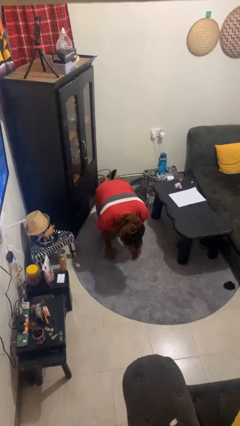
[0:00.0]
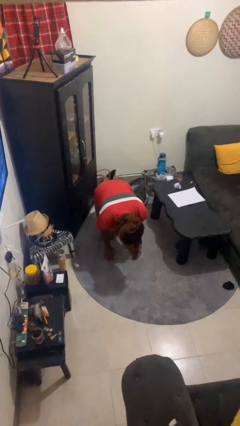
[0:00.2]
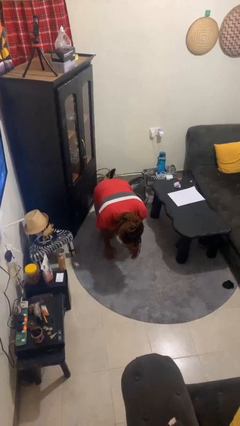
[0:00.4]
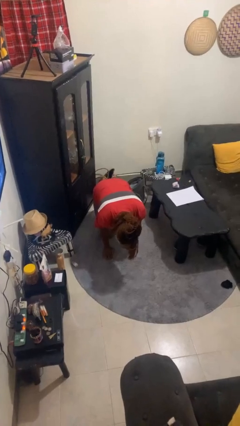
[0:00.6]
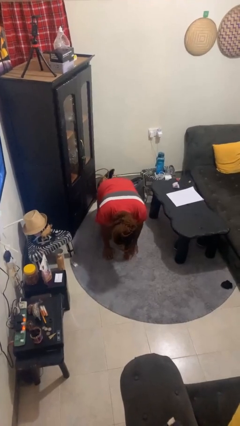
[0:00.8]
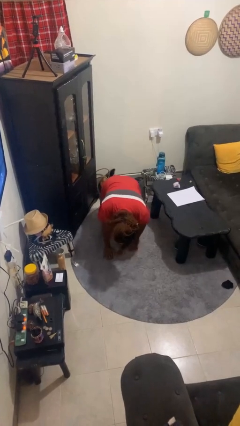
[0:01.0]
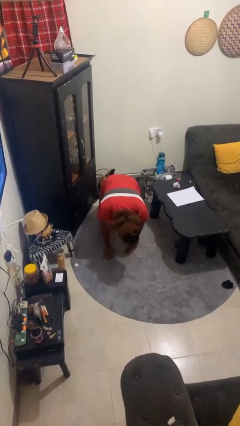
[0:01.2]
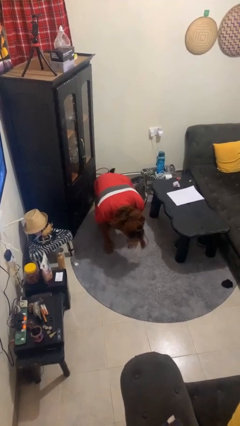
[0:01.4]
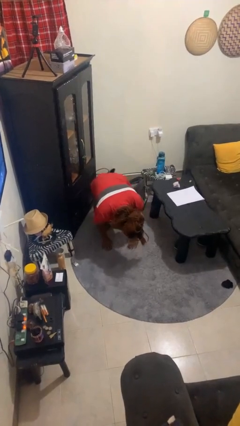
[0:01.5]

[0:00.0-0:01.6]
person crawls

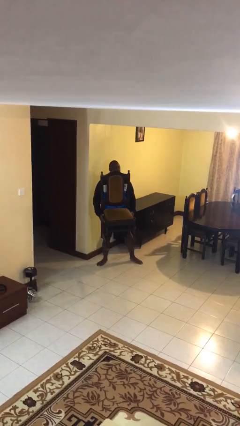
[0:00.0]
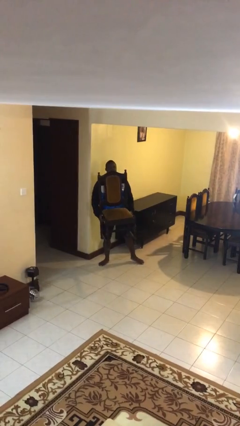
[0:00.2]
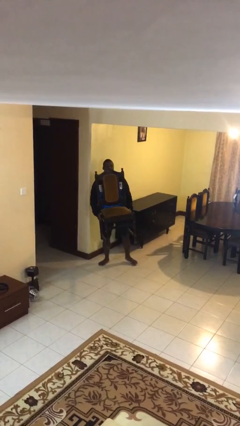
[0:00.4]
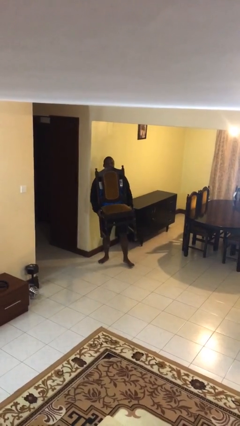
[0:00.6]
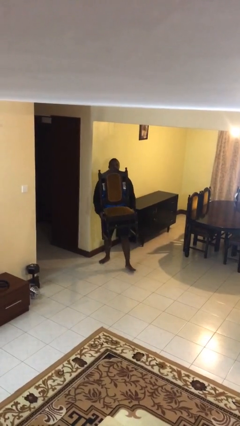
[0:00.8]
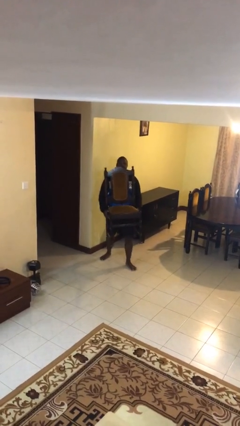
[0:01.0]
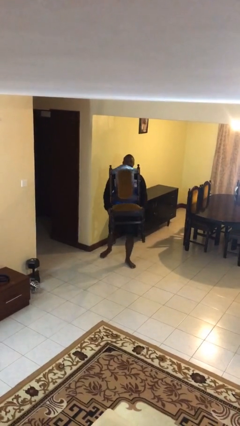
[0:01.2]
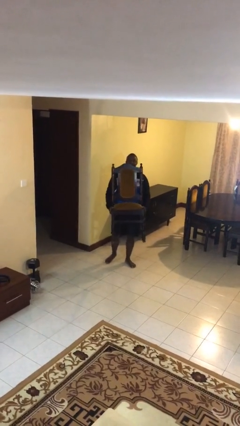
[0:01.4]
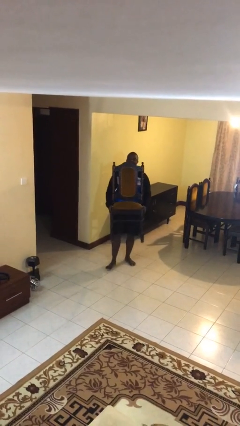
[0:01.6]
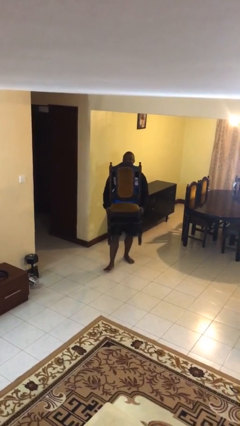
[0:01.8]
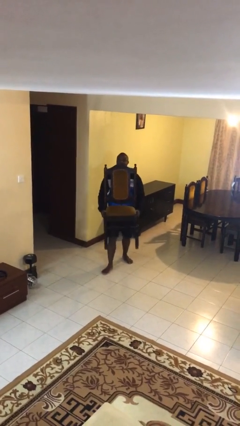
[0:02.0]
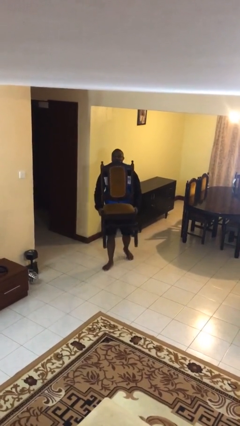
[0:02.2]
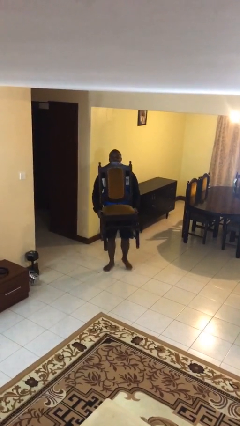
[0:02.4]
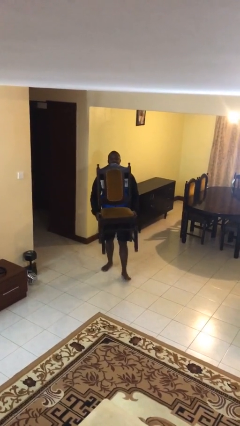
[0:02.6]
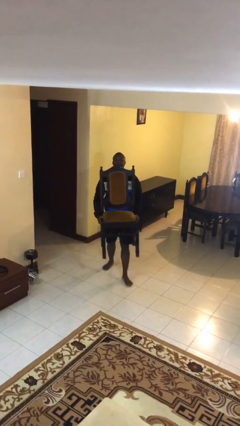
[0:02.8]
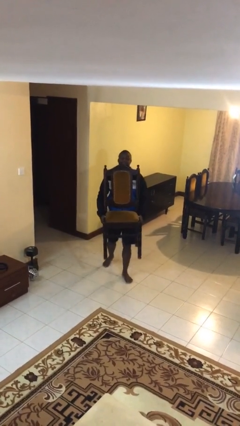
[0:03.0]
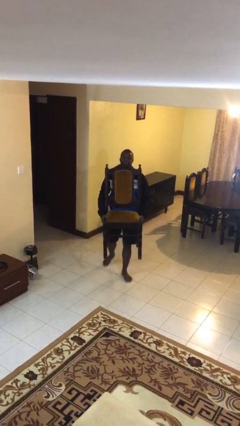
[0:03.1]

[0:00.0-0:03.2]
person carries heavy object

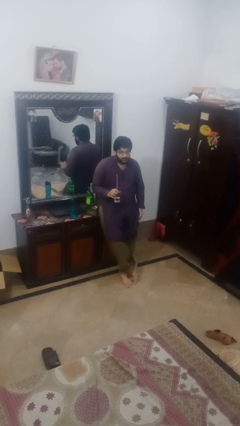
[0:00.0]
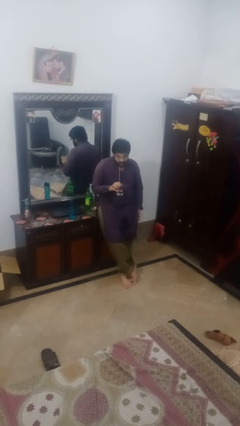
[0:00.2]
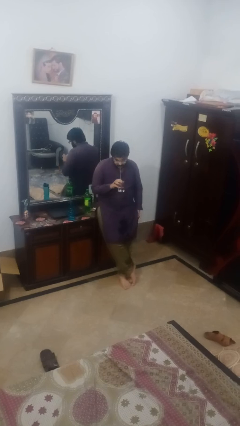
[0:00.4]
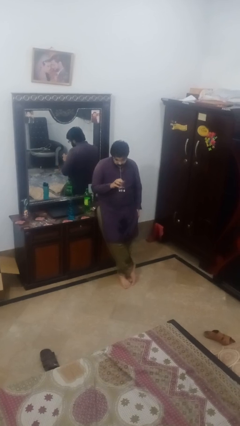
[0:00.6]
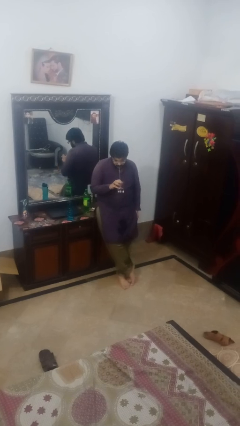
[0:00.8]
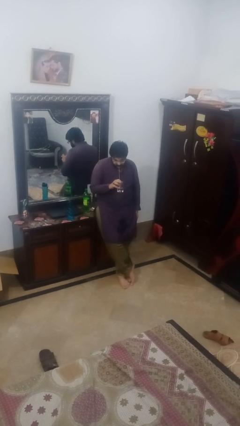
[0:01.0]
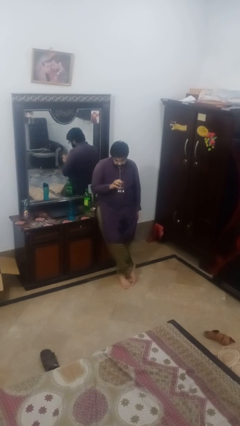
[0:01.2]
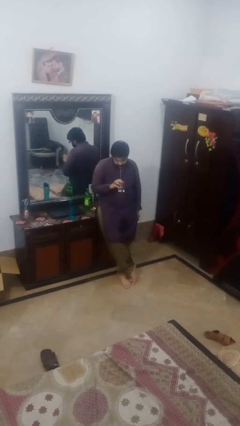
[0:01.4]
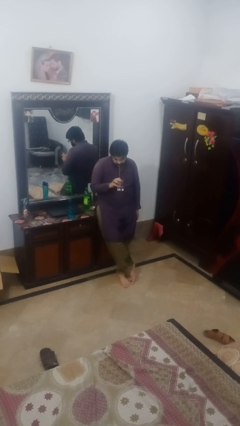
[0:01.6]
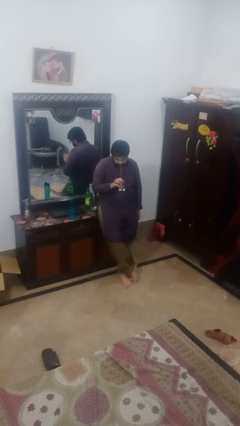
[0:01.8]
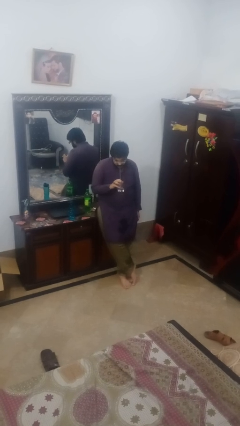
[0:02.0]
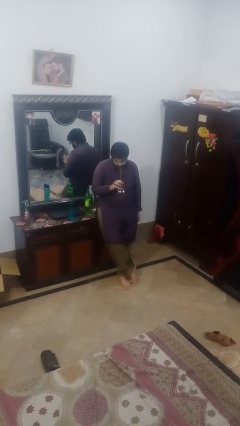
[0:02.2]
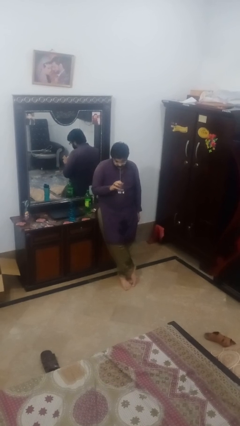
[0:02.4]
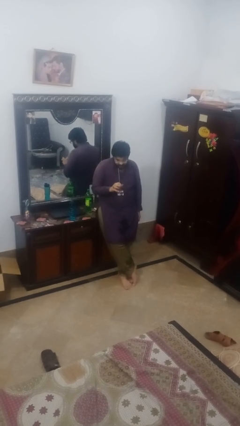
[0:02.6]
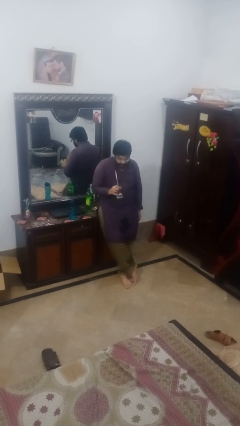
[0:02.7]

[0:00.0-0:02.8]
person drinks from straw

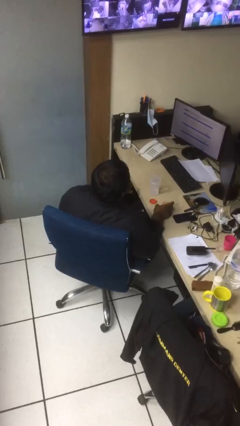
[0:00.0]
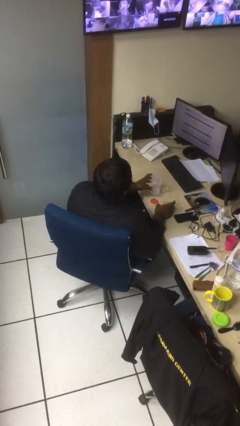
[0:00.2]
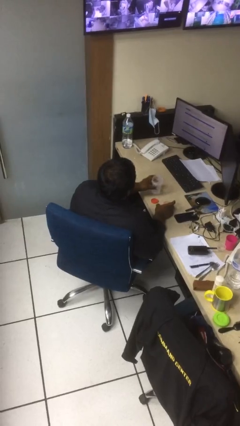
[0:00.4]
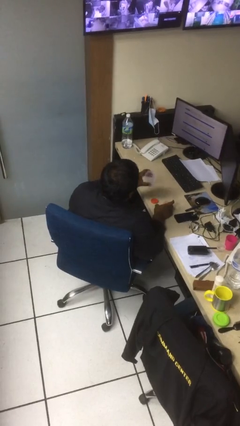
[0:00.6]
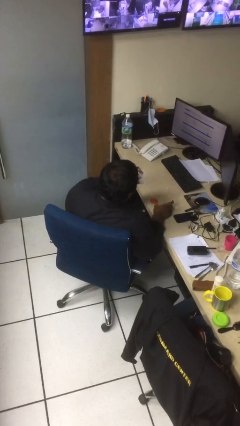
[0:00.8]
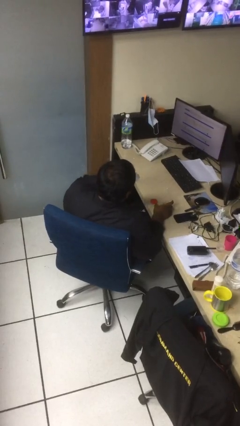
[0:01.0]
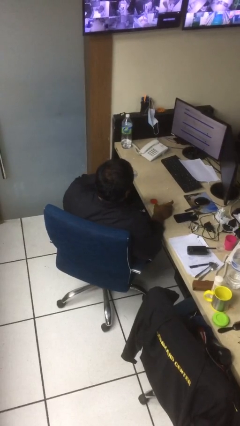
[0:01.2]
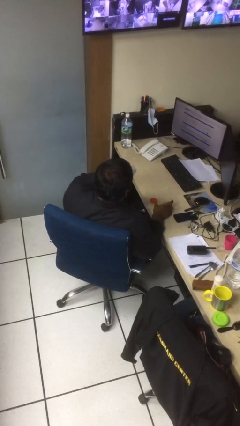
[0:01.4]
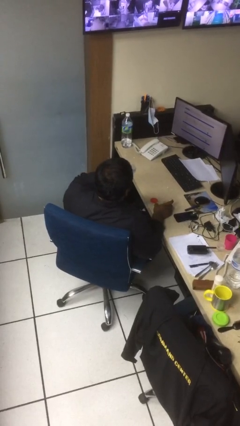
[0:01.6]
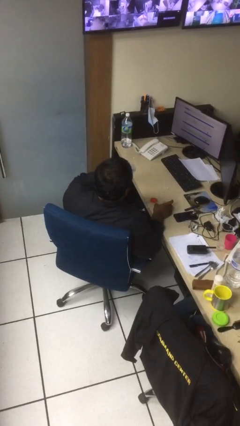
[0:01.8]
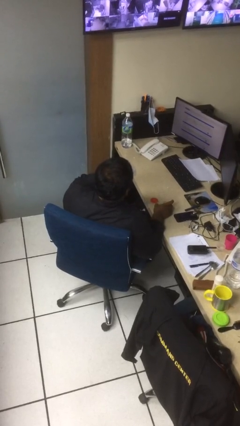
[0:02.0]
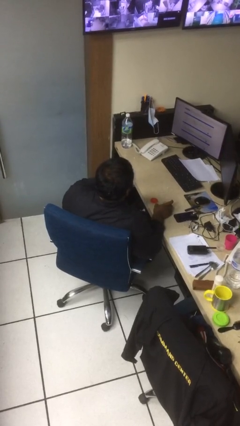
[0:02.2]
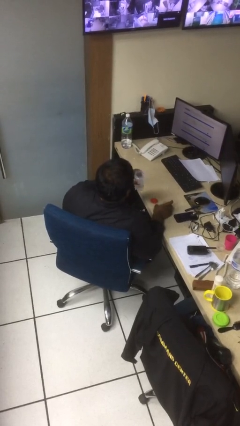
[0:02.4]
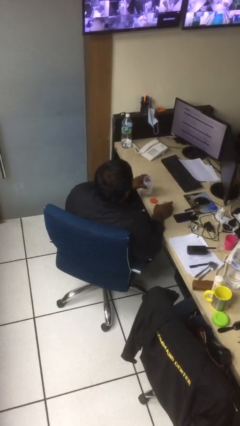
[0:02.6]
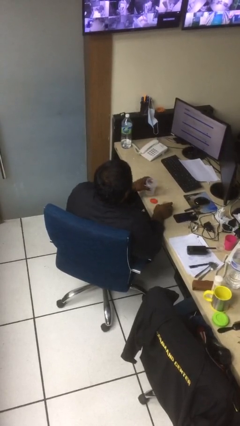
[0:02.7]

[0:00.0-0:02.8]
person drinks from cup

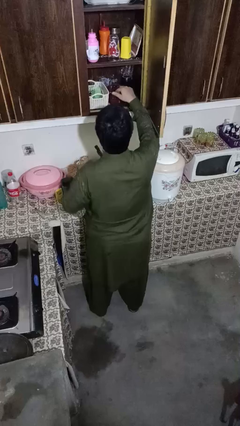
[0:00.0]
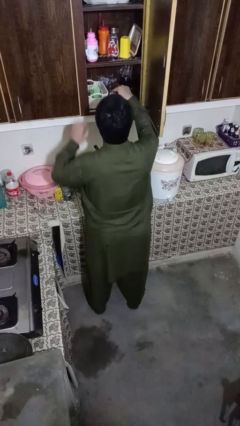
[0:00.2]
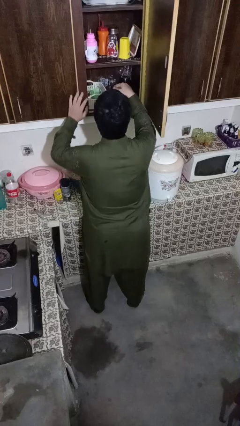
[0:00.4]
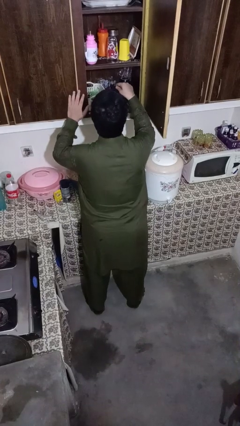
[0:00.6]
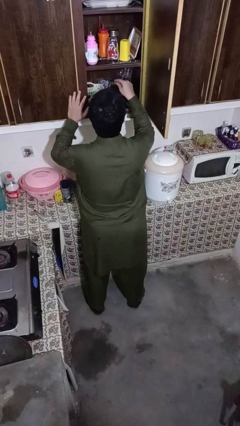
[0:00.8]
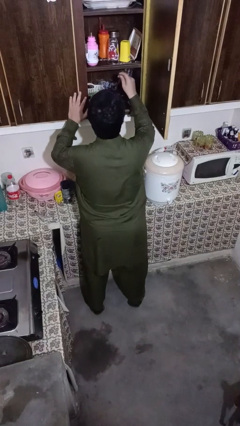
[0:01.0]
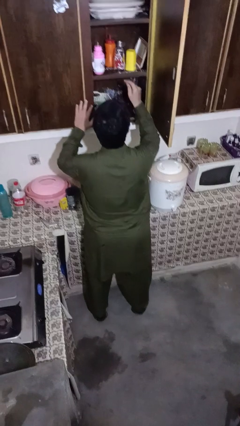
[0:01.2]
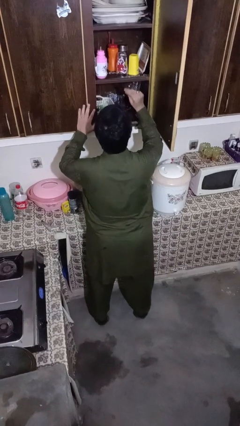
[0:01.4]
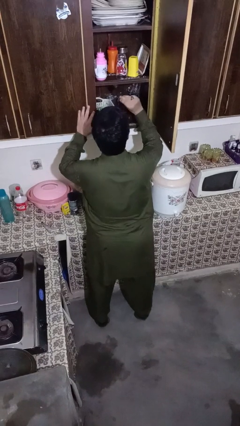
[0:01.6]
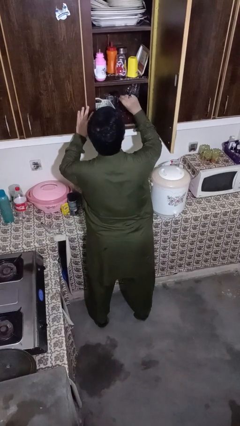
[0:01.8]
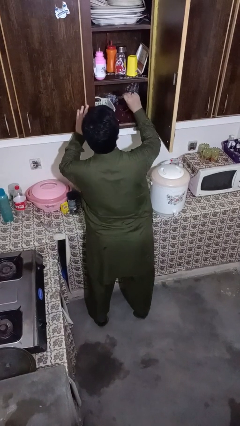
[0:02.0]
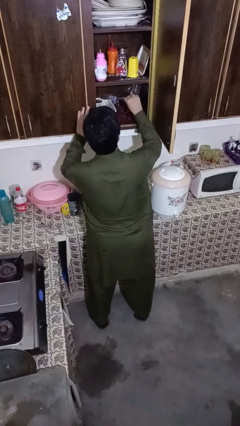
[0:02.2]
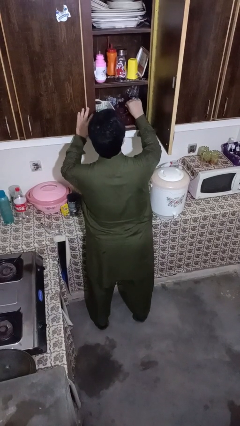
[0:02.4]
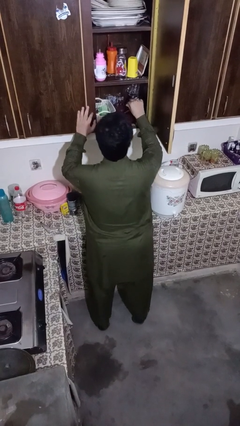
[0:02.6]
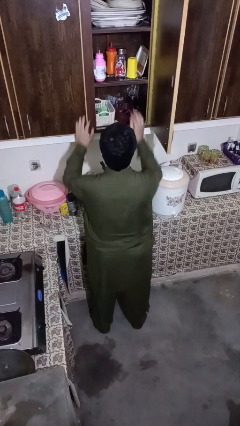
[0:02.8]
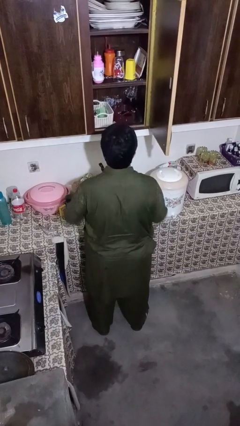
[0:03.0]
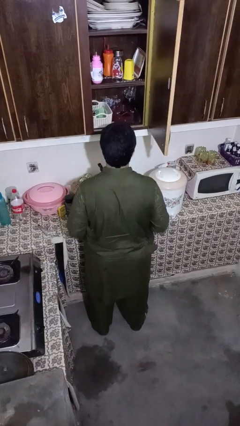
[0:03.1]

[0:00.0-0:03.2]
person searches in kitchen drawer

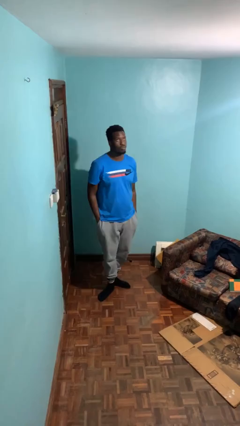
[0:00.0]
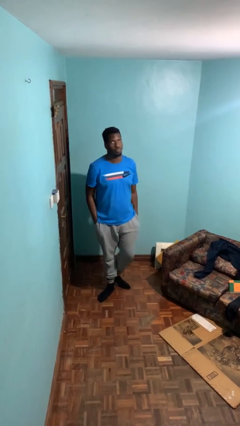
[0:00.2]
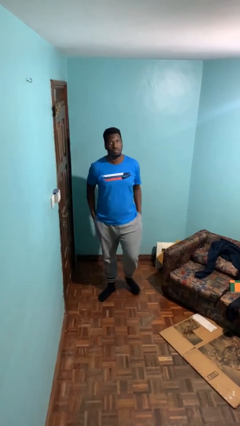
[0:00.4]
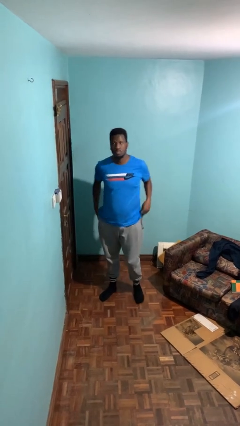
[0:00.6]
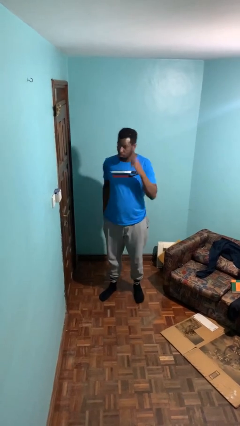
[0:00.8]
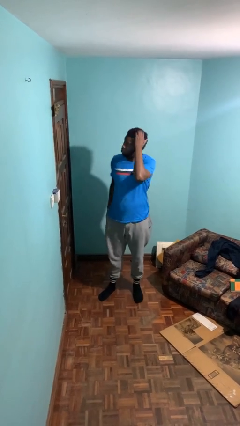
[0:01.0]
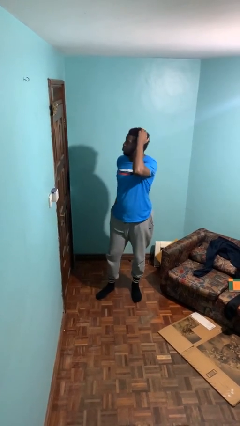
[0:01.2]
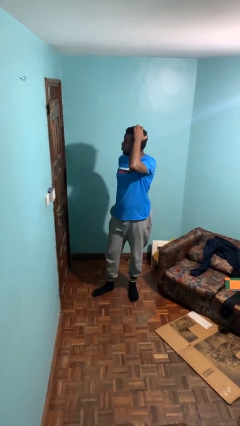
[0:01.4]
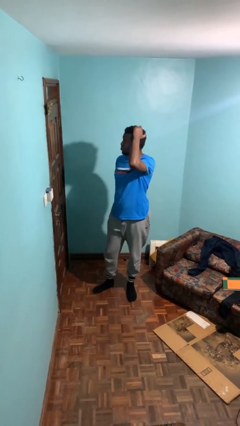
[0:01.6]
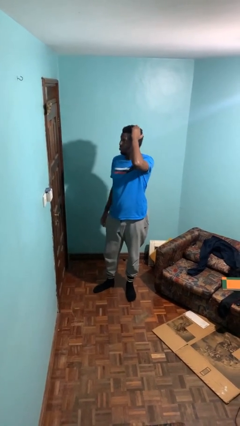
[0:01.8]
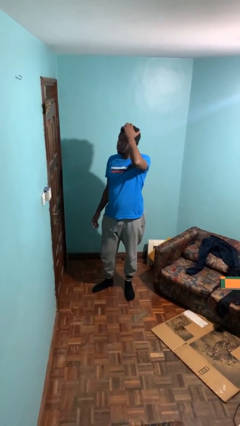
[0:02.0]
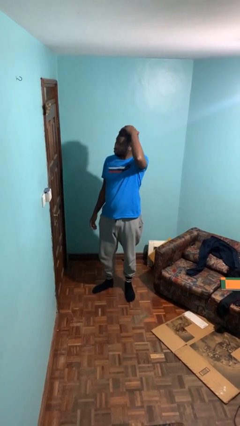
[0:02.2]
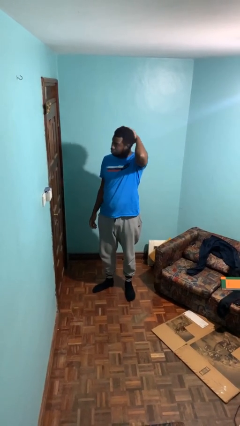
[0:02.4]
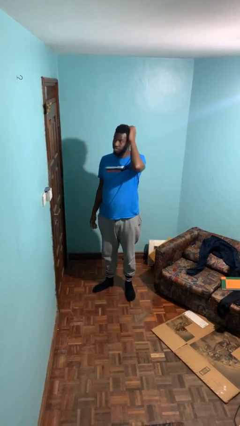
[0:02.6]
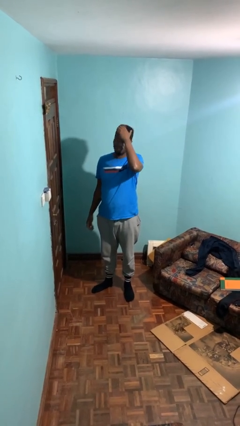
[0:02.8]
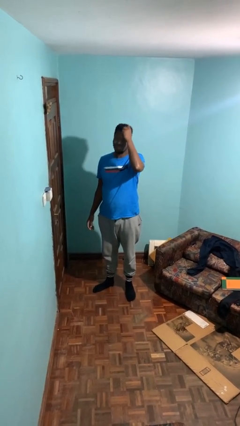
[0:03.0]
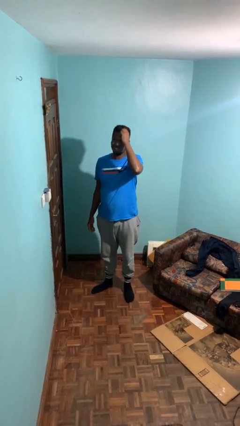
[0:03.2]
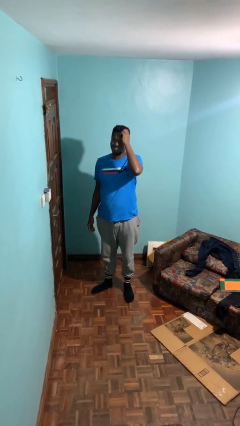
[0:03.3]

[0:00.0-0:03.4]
person scratches face

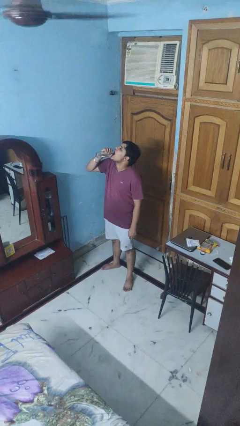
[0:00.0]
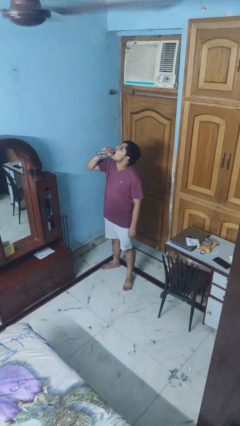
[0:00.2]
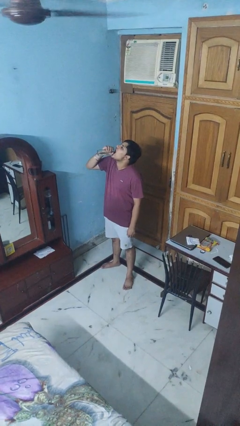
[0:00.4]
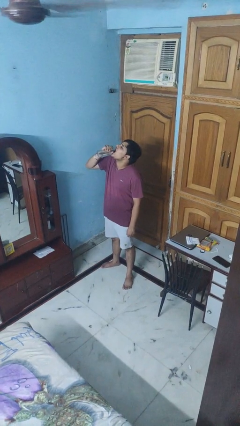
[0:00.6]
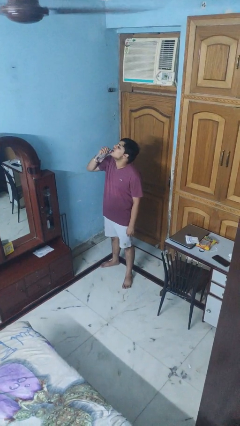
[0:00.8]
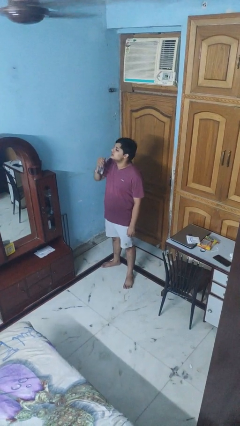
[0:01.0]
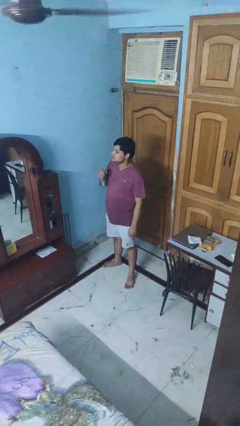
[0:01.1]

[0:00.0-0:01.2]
person drinks from bottle
